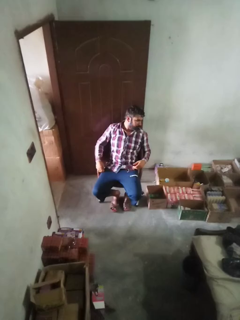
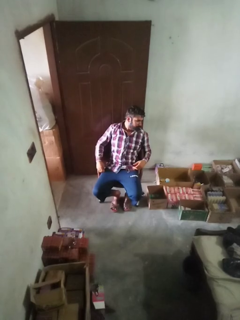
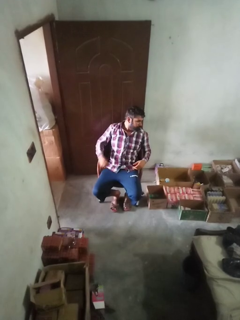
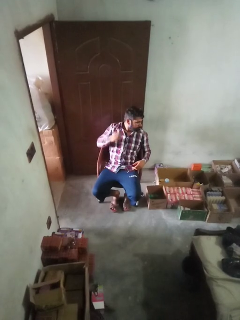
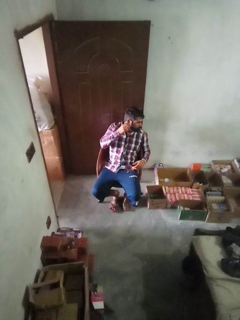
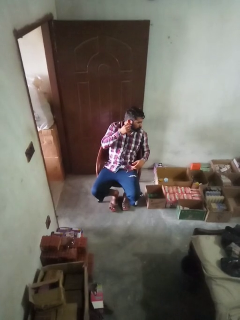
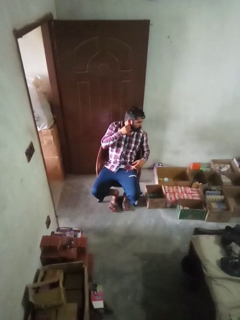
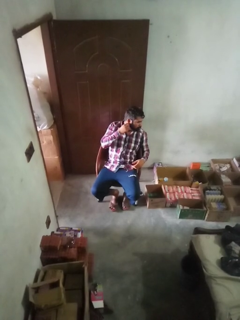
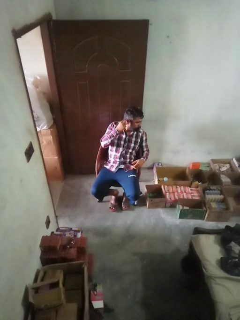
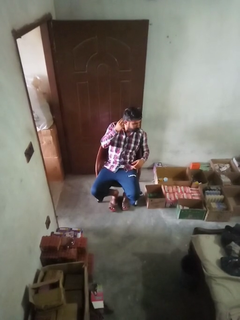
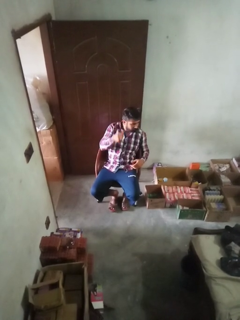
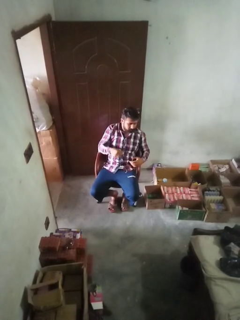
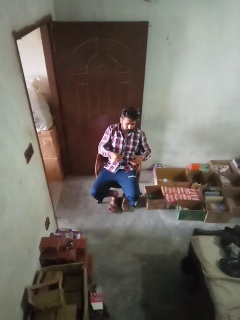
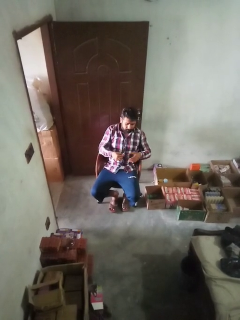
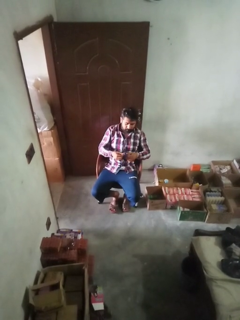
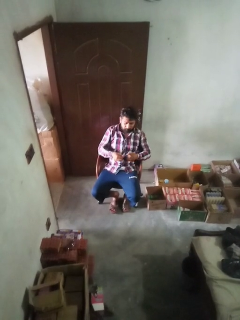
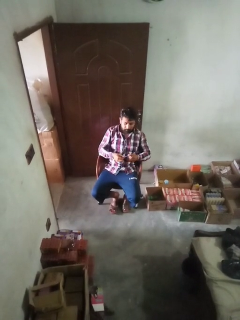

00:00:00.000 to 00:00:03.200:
person takes off earrings

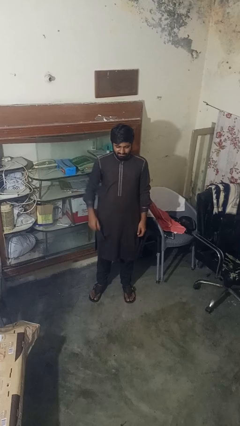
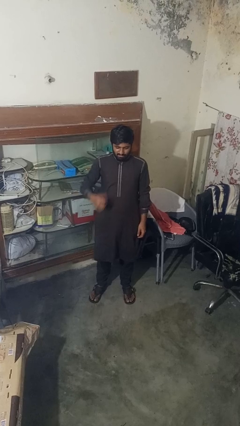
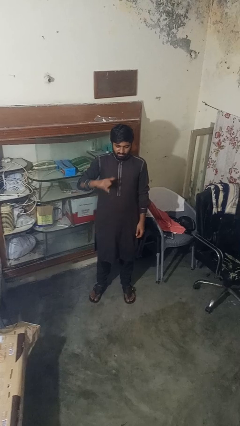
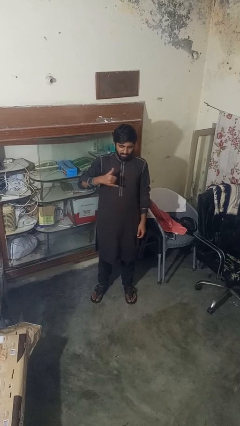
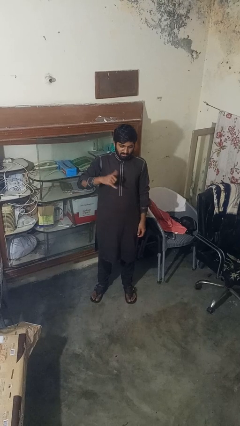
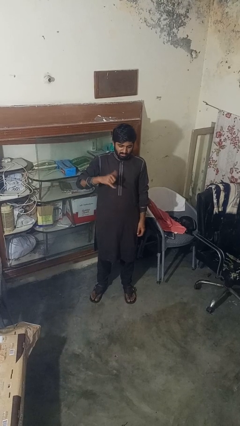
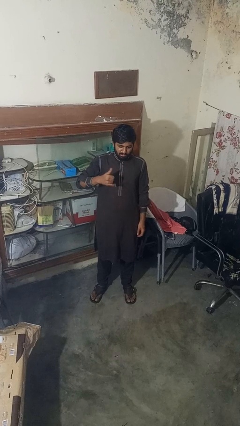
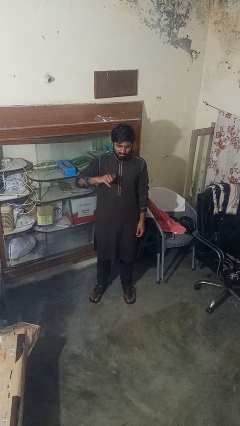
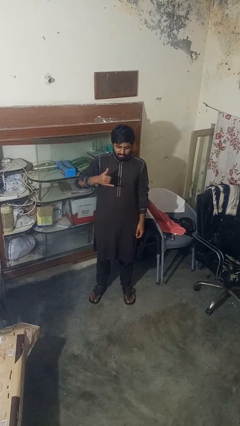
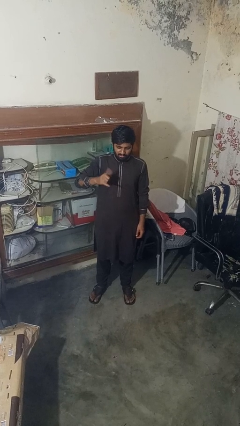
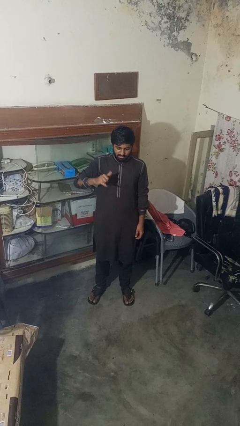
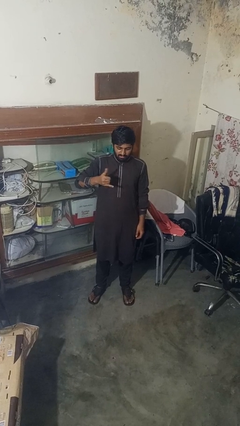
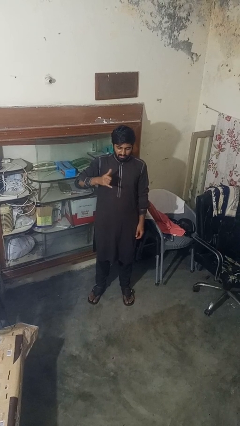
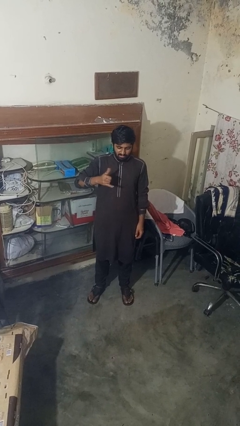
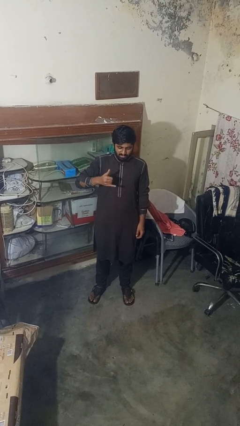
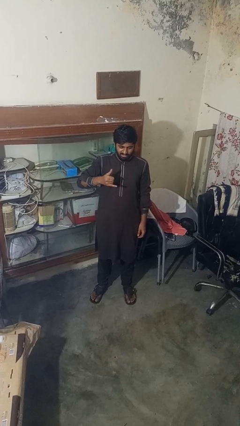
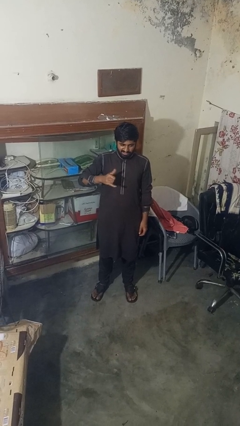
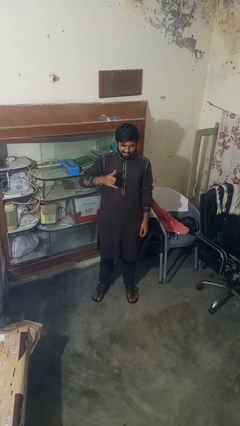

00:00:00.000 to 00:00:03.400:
person gestures hang loose

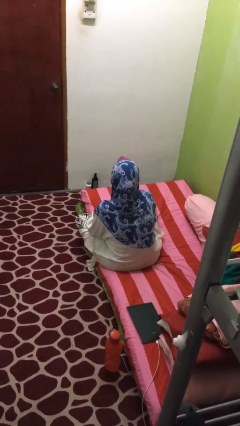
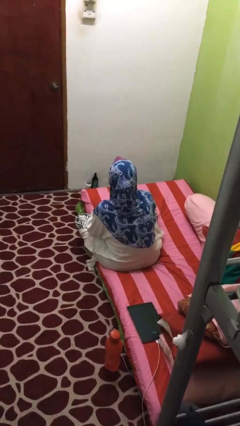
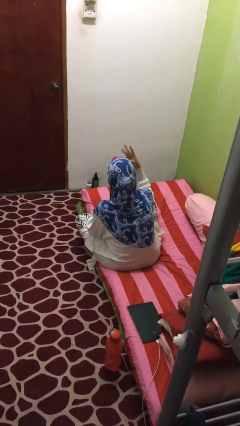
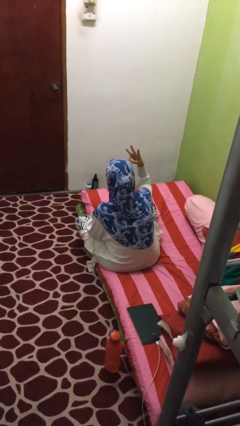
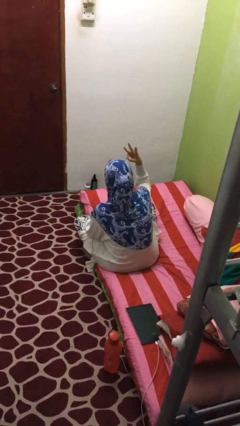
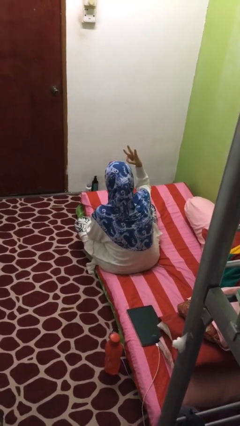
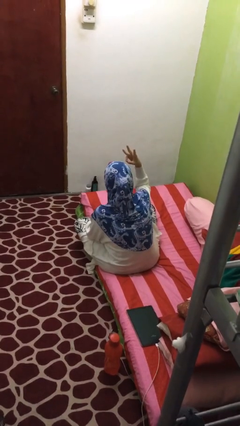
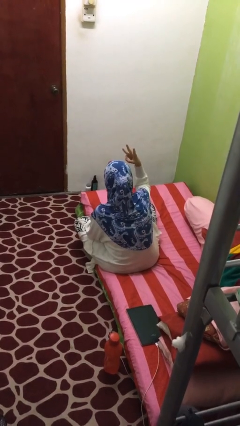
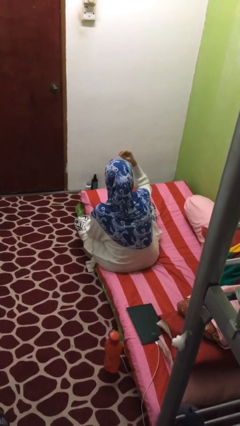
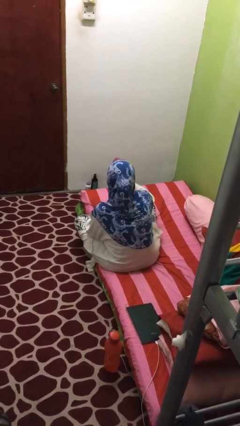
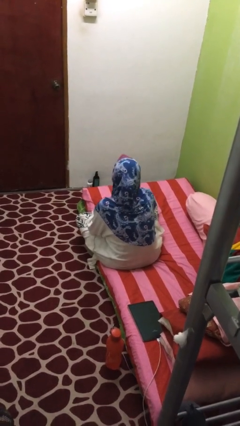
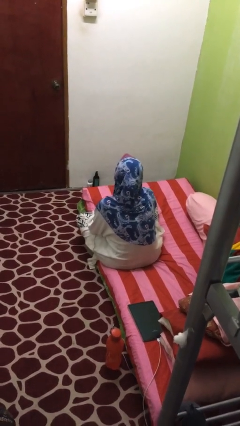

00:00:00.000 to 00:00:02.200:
person gestures number three

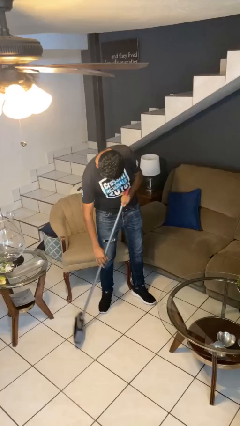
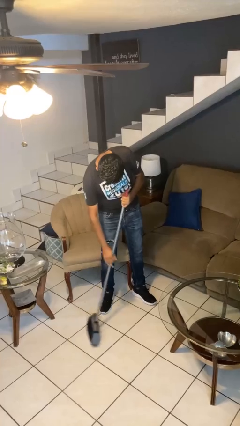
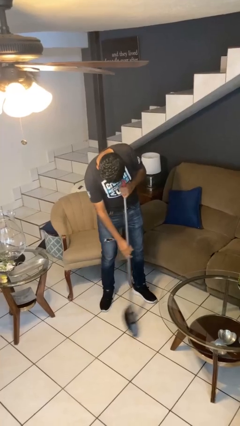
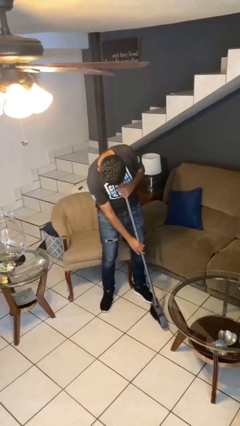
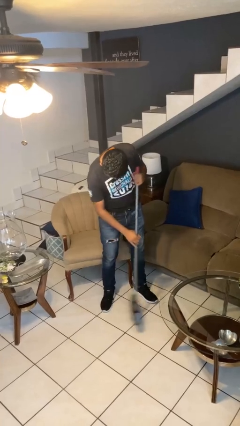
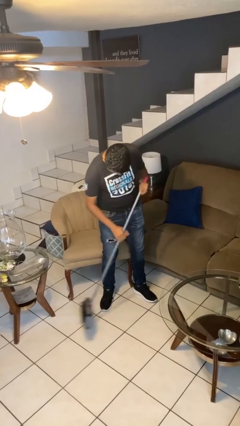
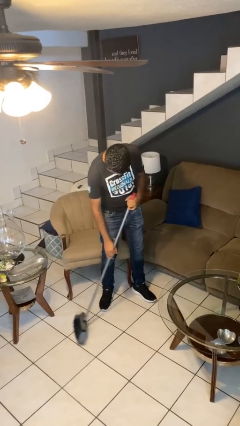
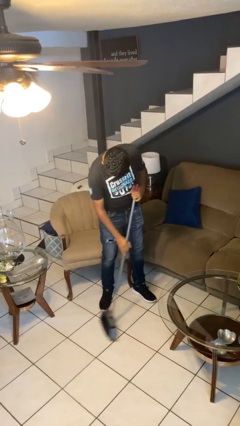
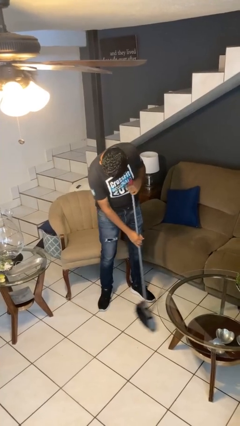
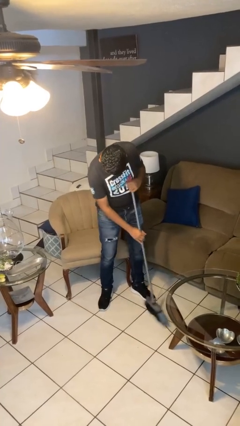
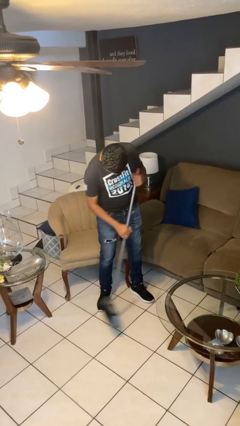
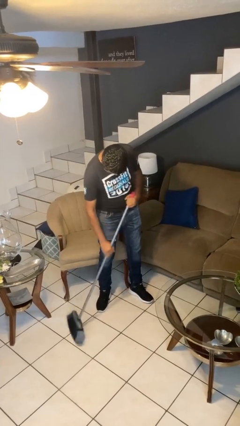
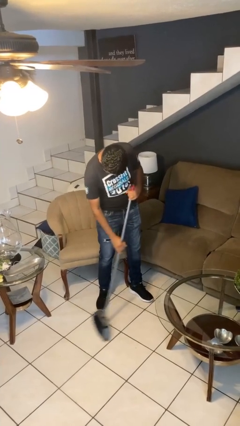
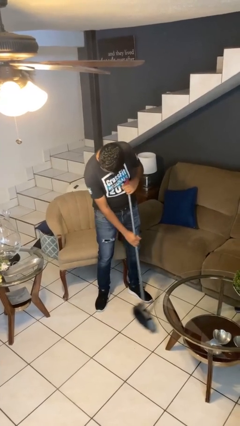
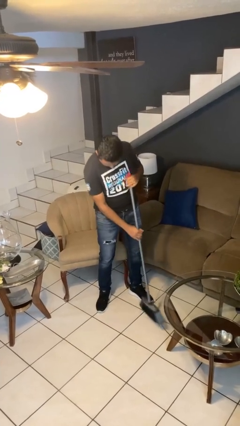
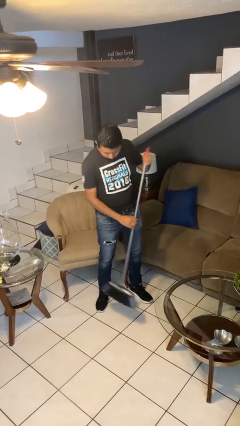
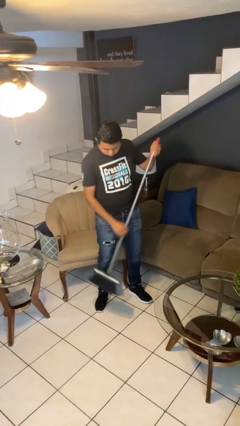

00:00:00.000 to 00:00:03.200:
person sweeps floor

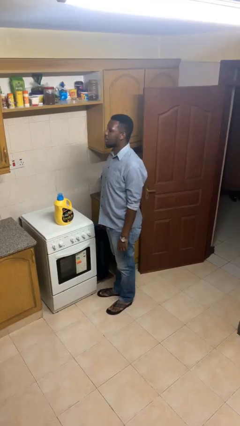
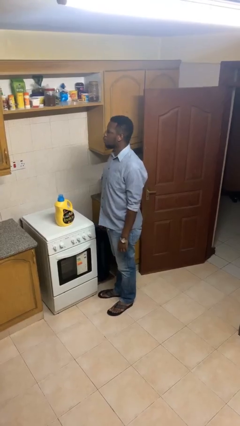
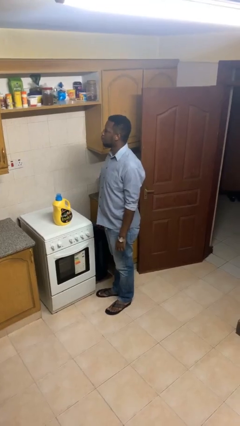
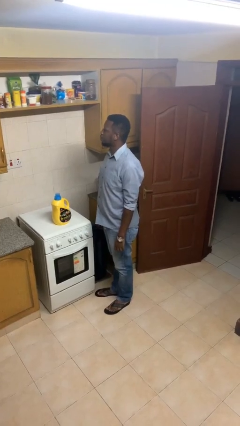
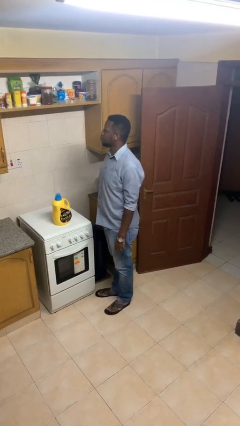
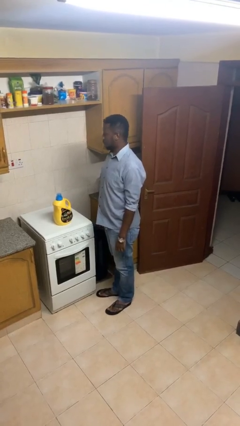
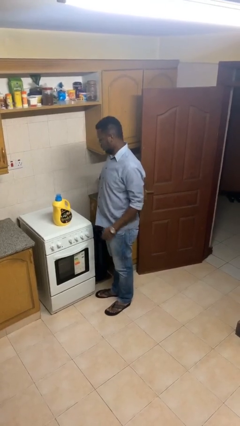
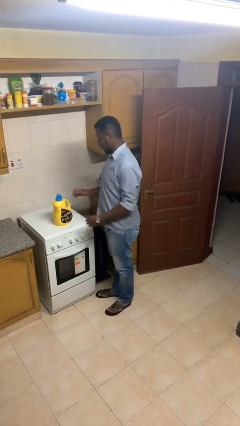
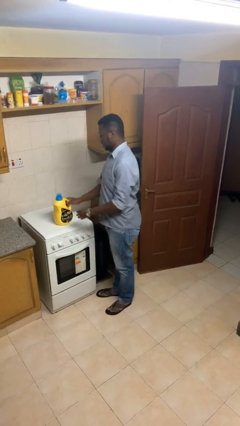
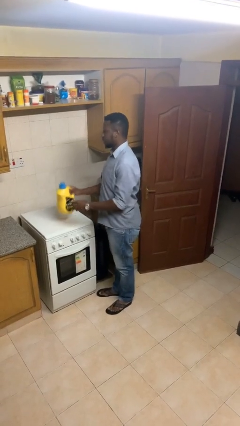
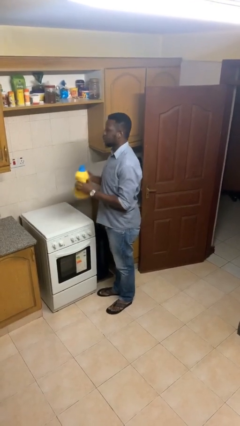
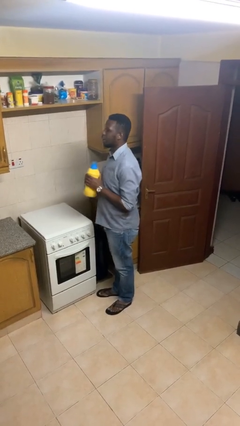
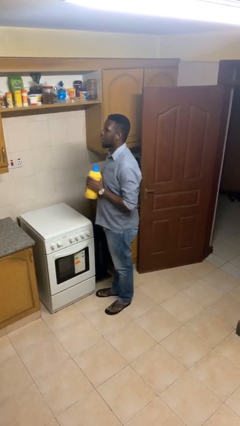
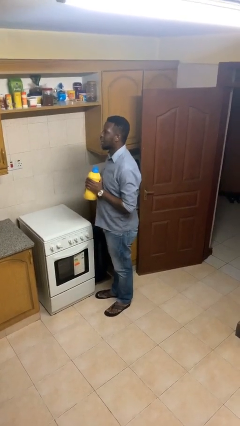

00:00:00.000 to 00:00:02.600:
person picks up object from table

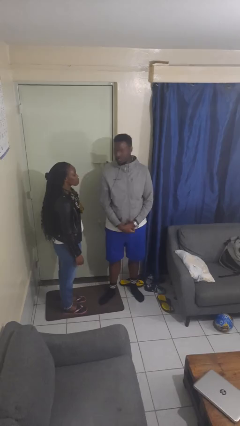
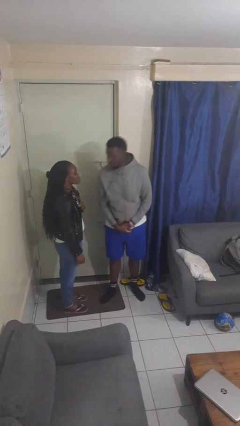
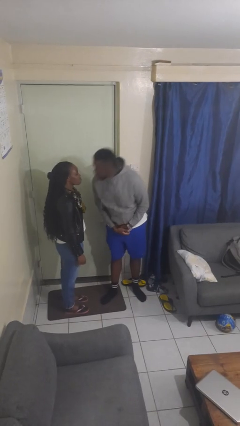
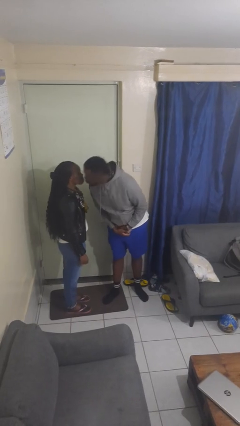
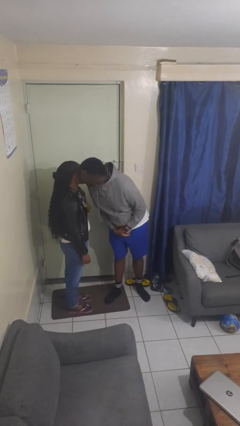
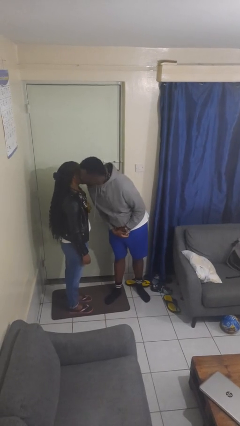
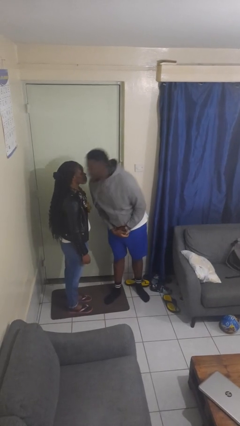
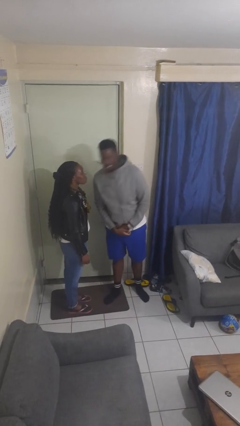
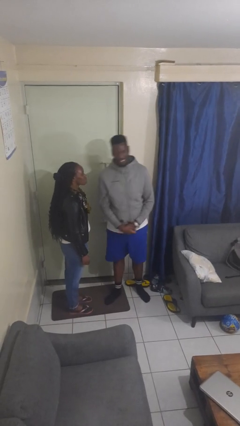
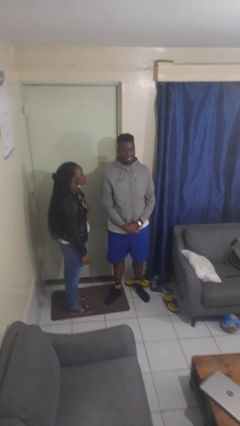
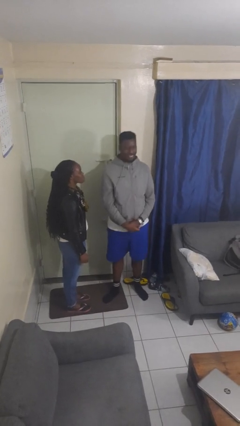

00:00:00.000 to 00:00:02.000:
person kisses cheek of person

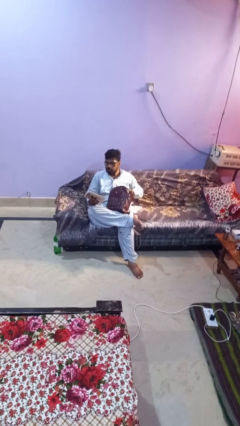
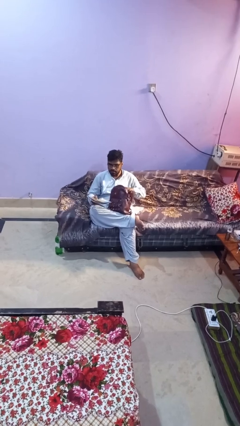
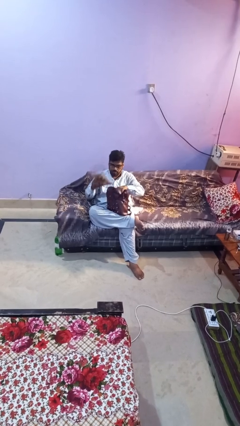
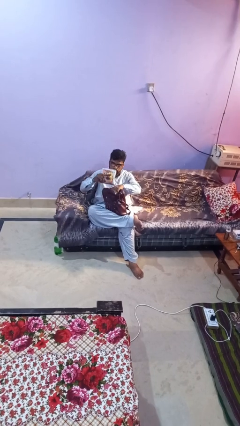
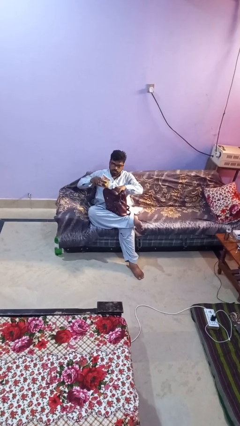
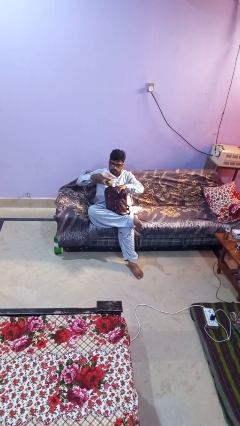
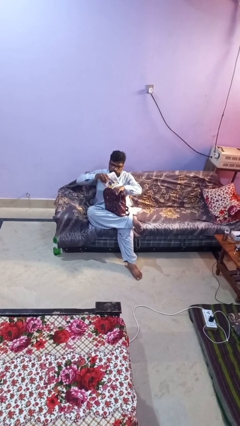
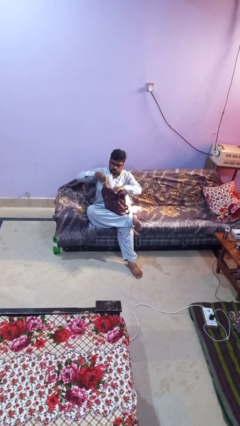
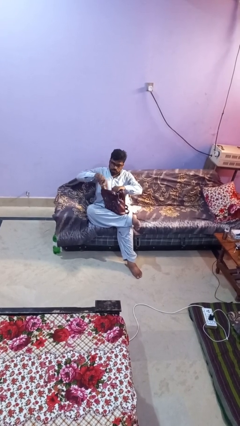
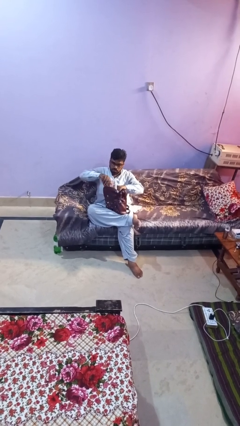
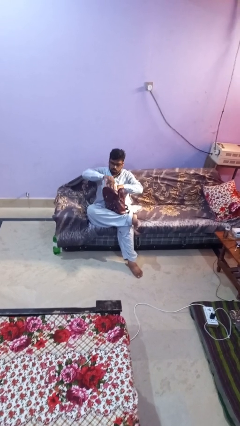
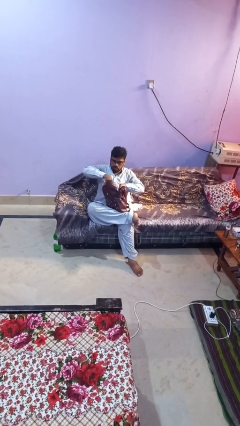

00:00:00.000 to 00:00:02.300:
person puts object into backpack
